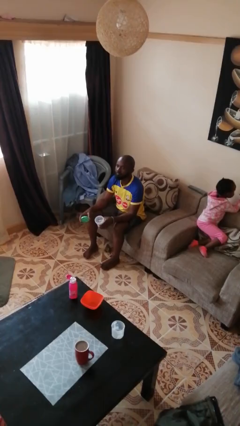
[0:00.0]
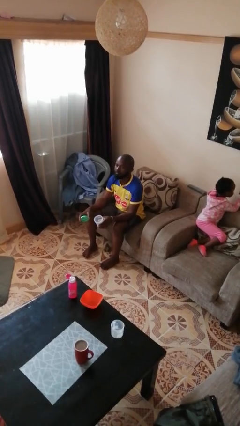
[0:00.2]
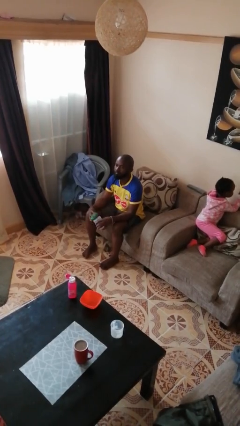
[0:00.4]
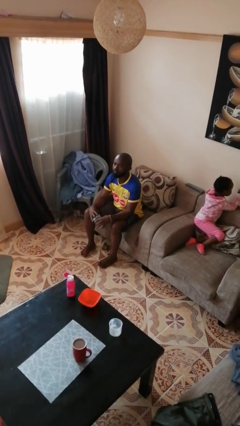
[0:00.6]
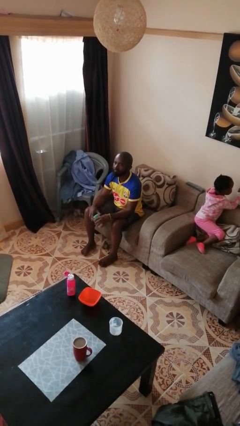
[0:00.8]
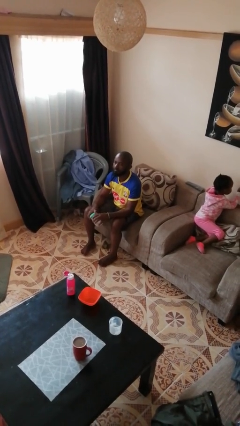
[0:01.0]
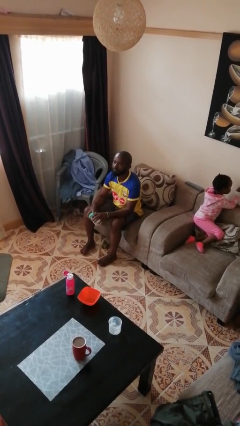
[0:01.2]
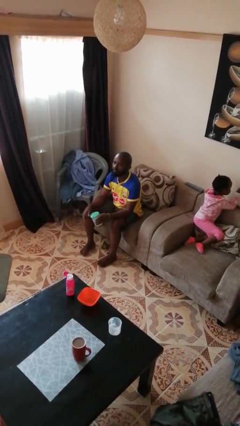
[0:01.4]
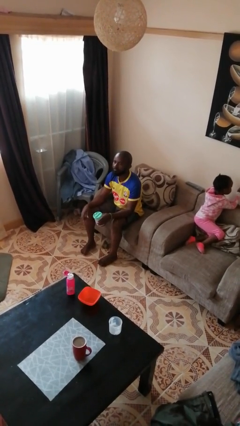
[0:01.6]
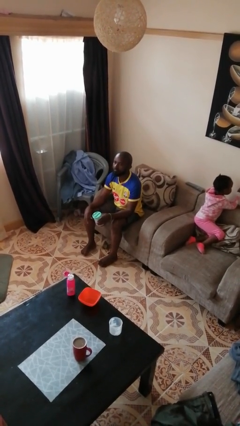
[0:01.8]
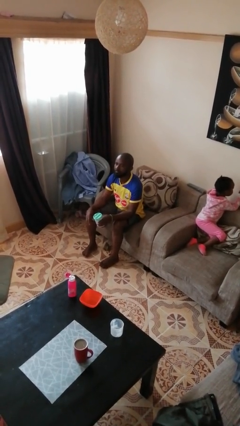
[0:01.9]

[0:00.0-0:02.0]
person closes jar

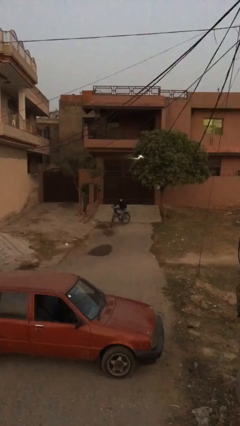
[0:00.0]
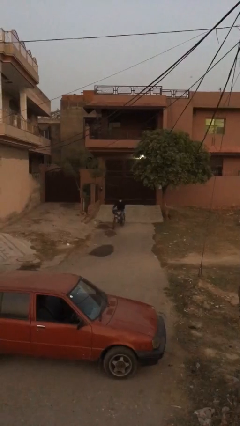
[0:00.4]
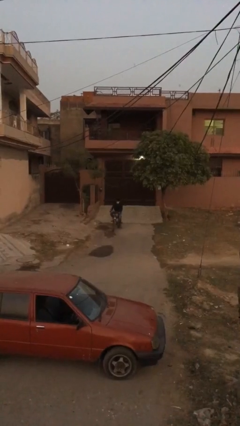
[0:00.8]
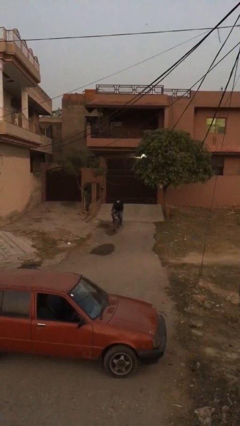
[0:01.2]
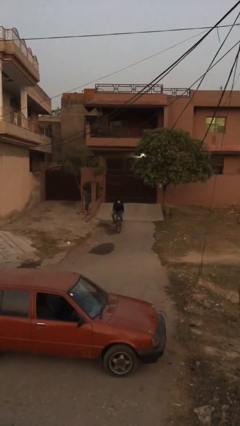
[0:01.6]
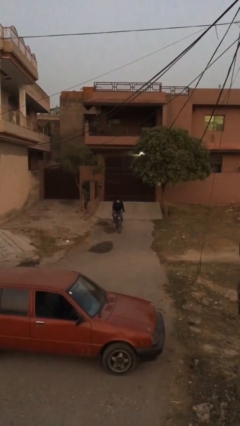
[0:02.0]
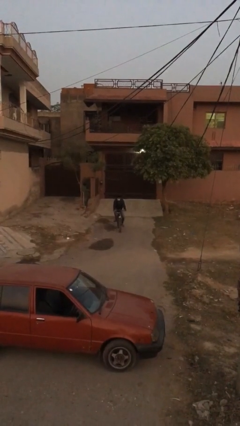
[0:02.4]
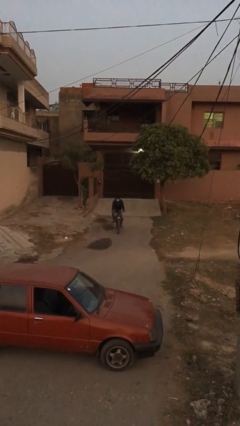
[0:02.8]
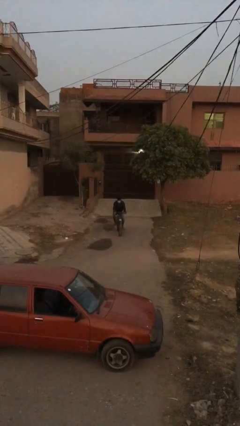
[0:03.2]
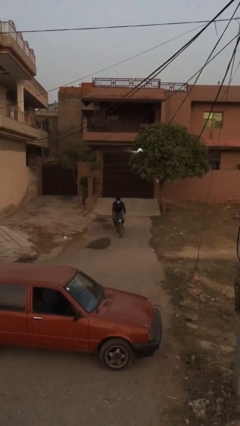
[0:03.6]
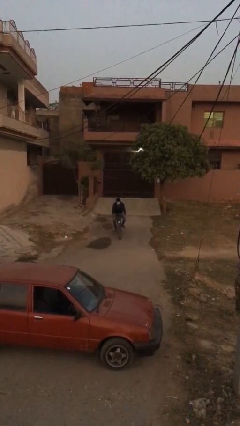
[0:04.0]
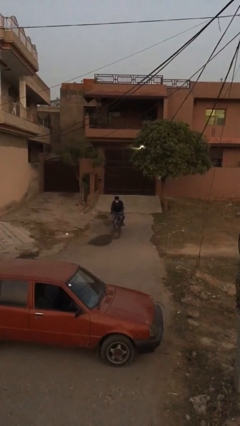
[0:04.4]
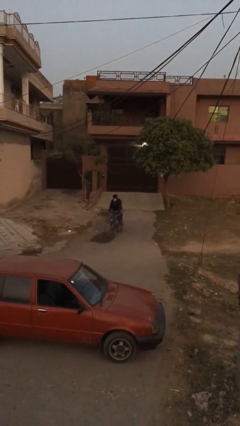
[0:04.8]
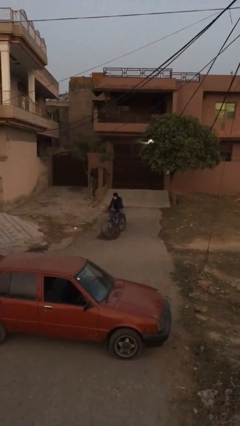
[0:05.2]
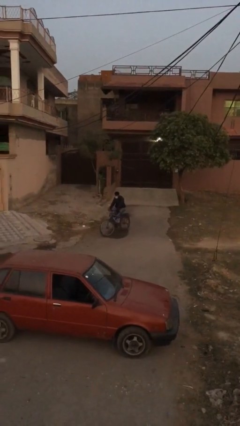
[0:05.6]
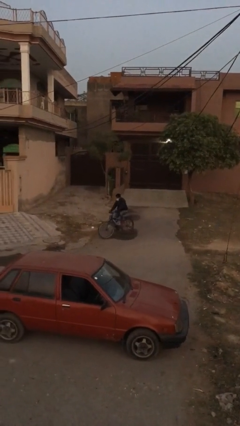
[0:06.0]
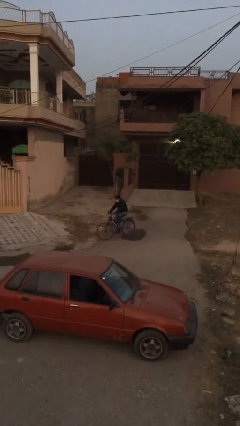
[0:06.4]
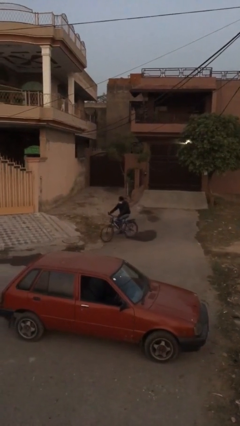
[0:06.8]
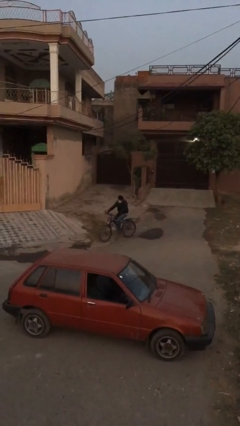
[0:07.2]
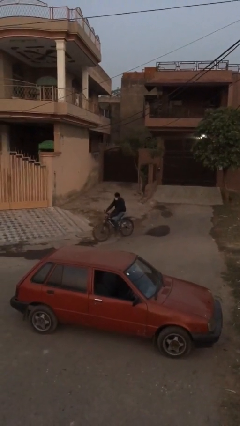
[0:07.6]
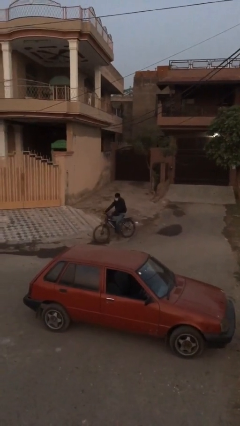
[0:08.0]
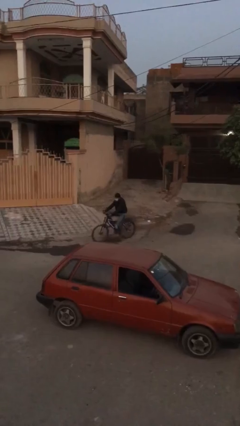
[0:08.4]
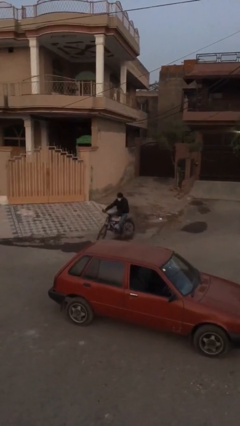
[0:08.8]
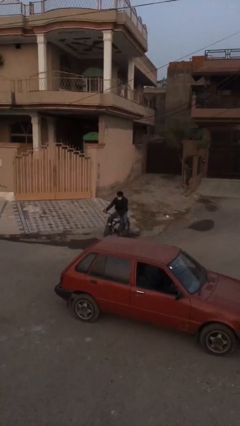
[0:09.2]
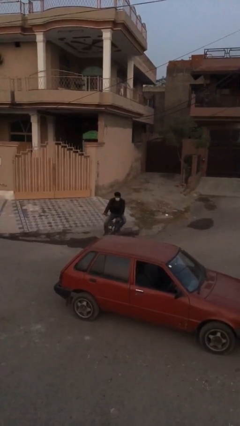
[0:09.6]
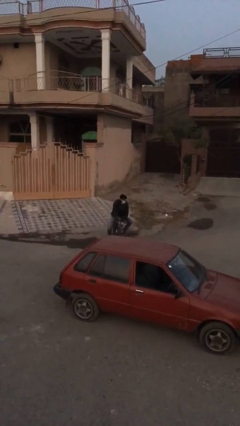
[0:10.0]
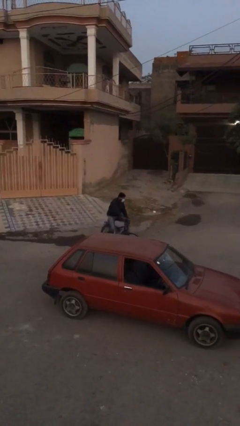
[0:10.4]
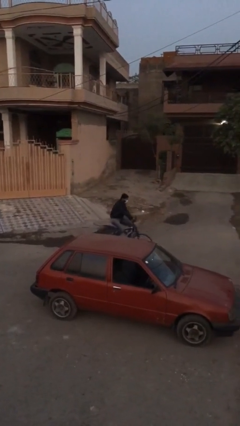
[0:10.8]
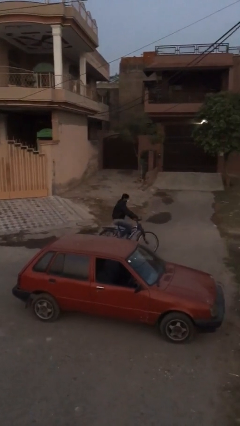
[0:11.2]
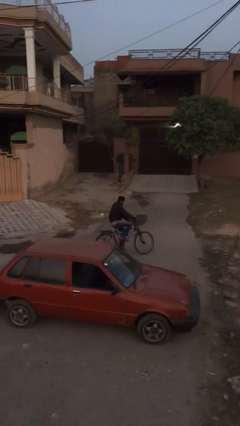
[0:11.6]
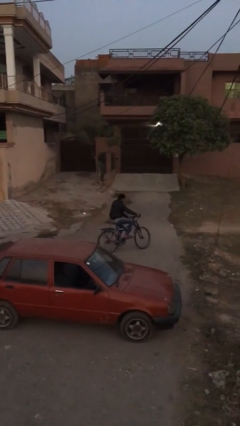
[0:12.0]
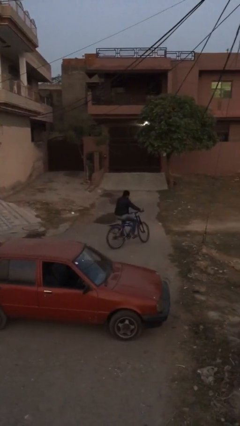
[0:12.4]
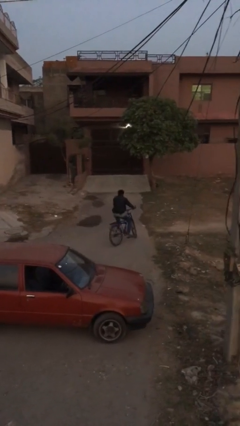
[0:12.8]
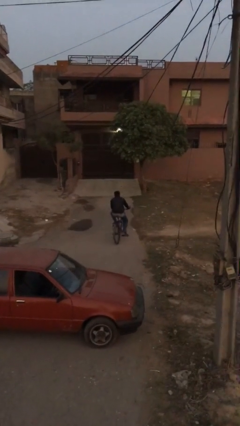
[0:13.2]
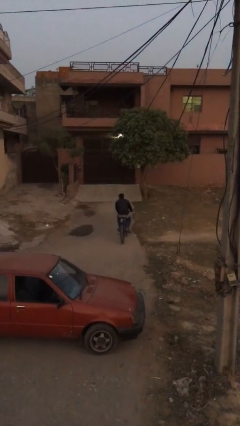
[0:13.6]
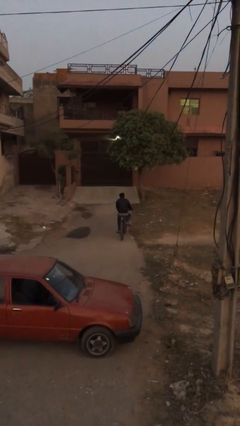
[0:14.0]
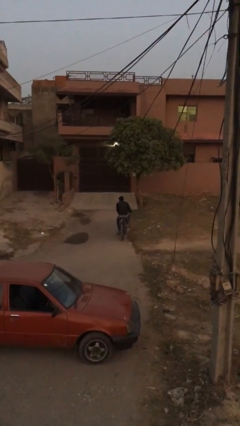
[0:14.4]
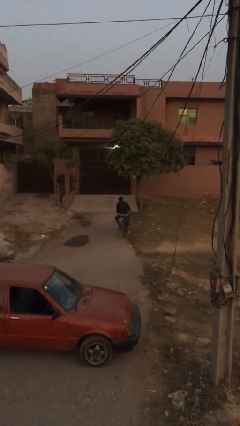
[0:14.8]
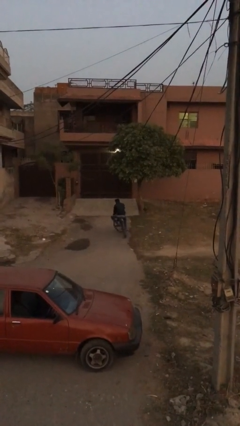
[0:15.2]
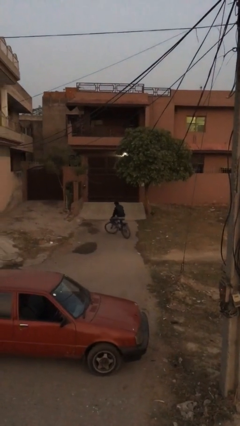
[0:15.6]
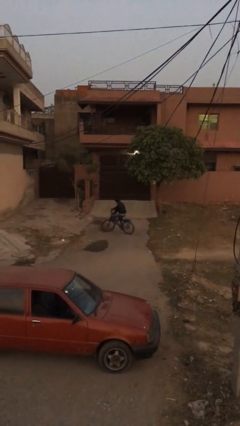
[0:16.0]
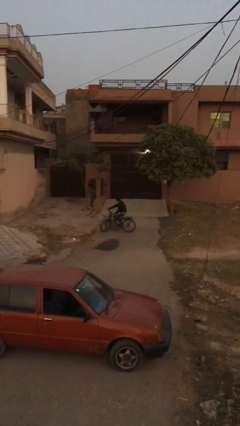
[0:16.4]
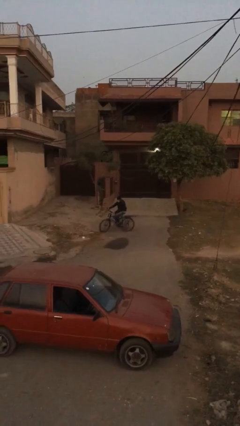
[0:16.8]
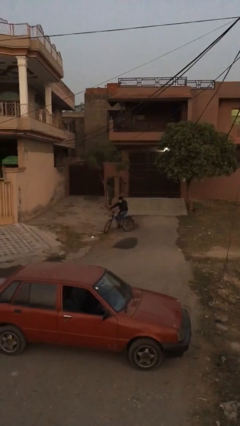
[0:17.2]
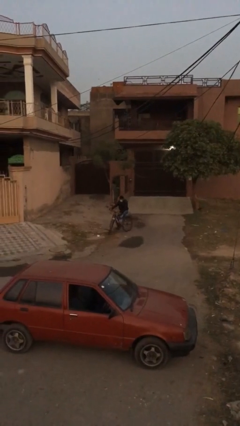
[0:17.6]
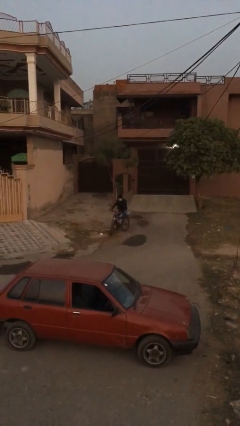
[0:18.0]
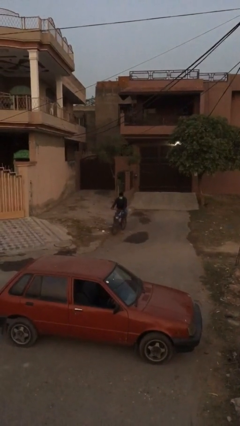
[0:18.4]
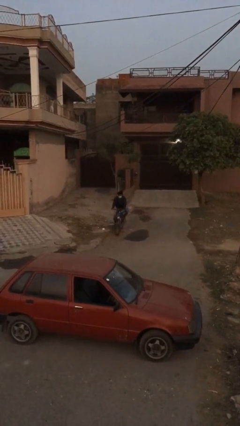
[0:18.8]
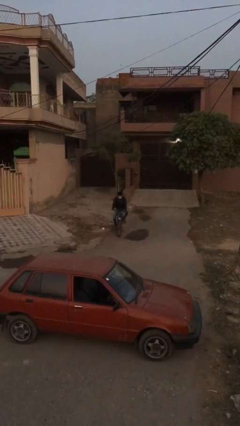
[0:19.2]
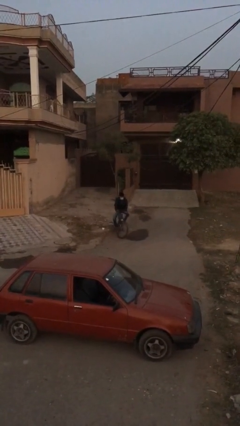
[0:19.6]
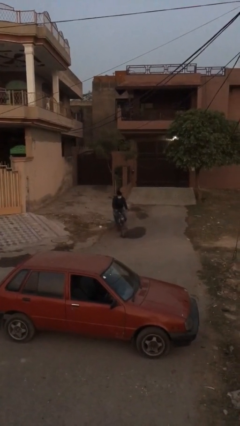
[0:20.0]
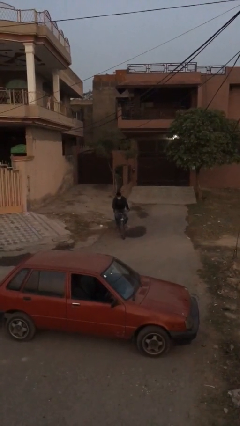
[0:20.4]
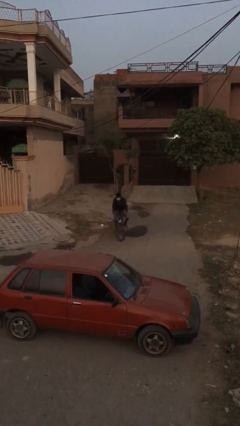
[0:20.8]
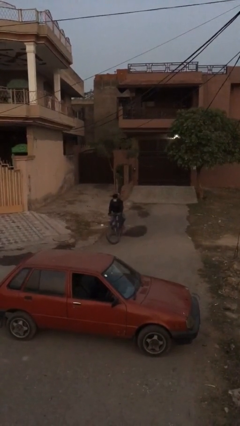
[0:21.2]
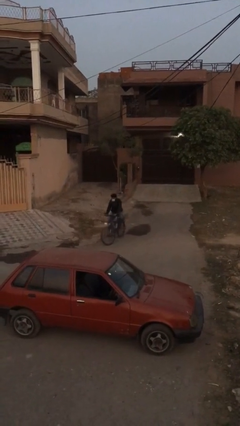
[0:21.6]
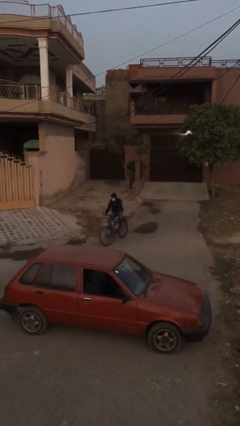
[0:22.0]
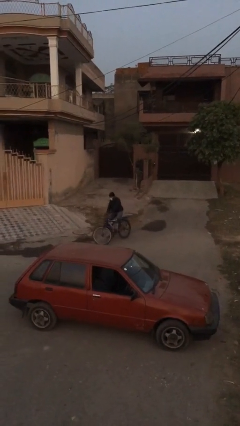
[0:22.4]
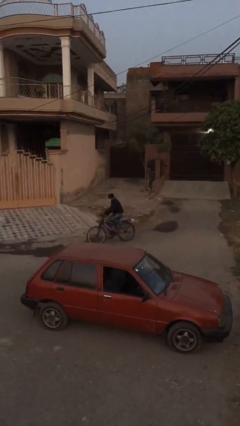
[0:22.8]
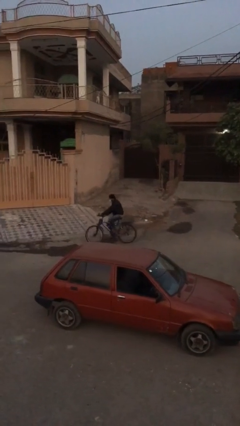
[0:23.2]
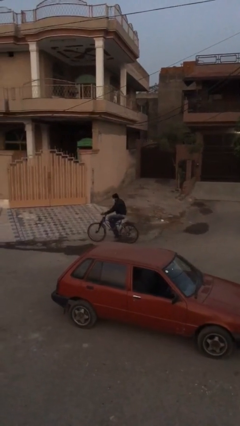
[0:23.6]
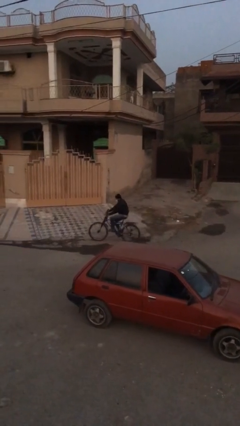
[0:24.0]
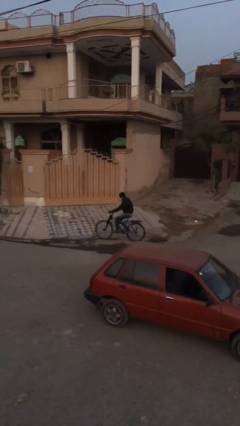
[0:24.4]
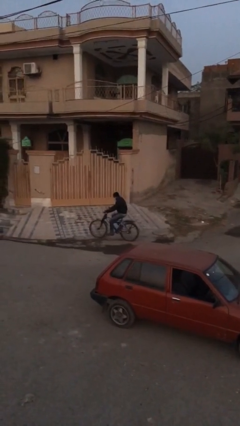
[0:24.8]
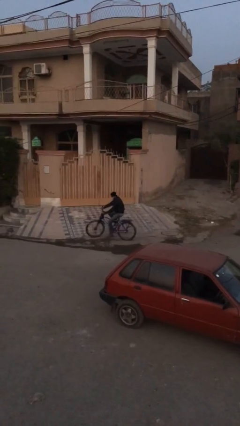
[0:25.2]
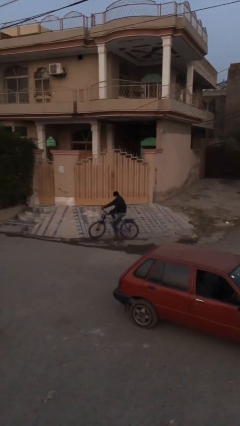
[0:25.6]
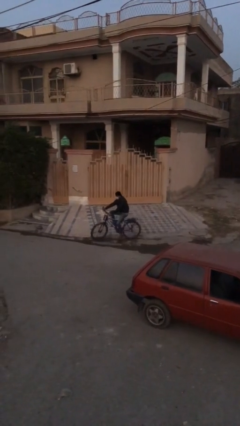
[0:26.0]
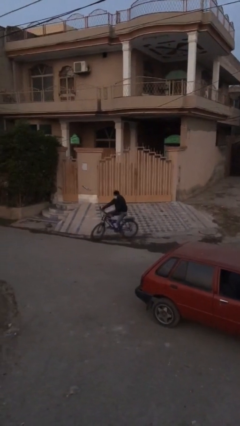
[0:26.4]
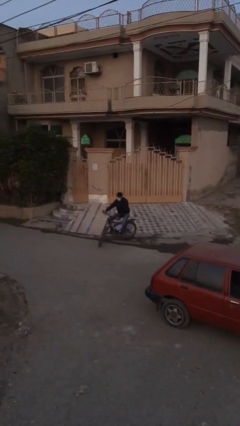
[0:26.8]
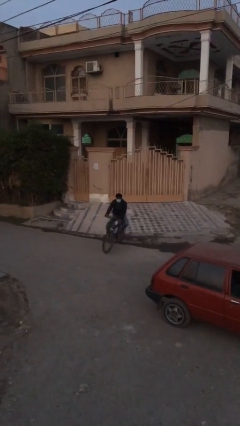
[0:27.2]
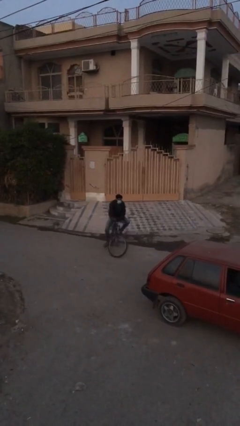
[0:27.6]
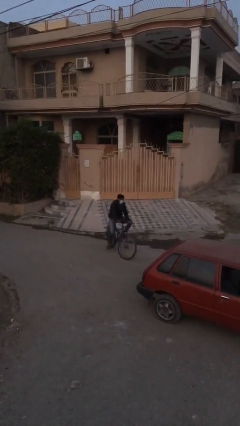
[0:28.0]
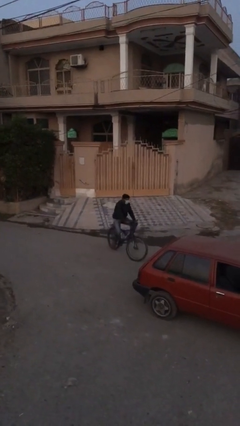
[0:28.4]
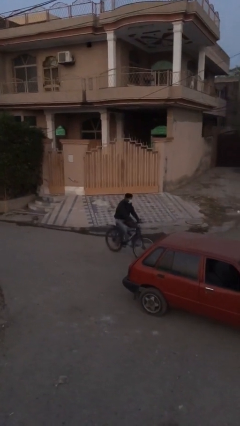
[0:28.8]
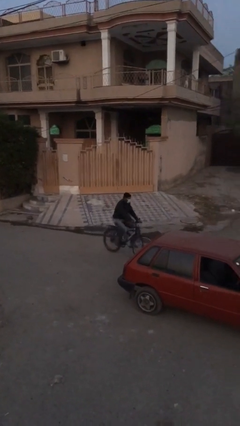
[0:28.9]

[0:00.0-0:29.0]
person rides bicycle

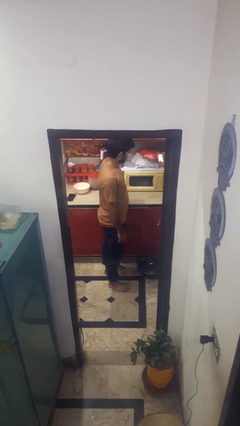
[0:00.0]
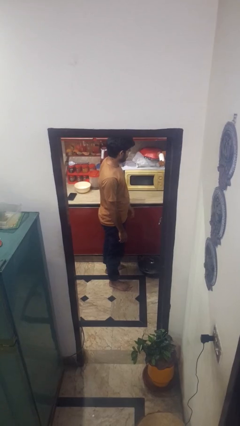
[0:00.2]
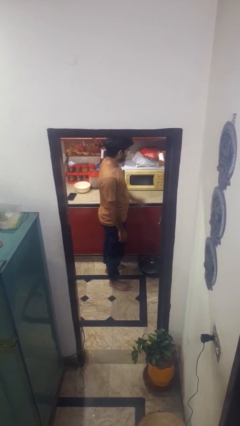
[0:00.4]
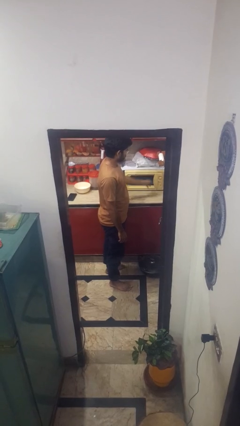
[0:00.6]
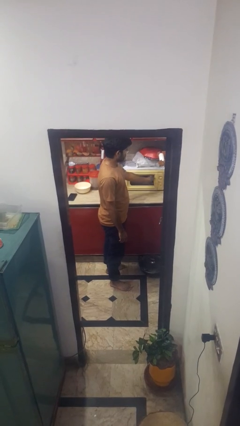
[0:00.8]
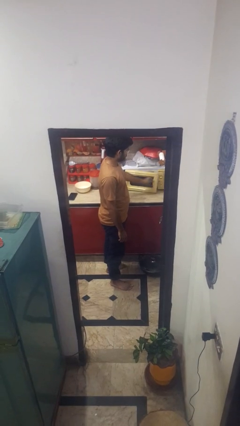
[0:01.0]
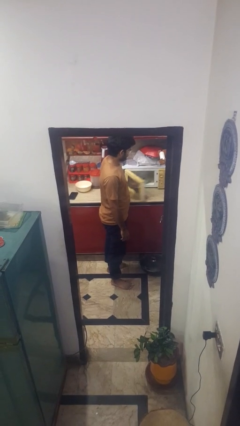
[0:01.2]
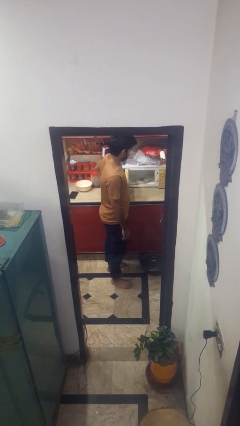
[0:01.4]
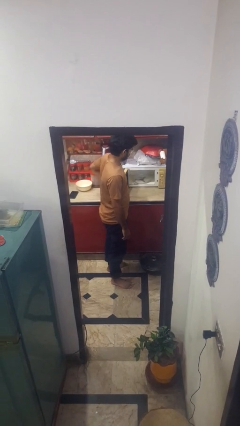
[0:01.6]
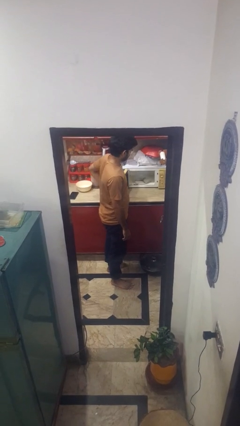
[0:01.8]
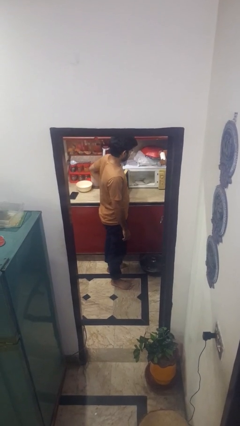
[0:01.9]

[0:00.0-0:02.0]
person opens microwave
